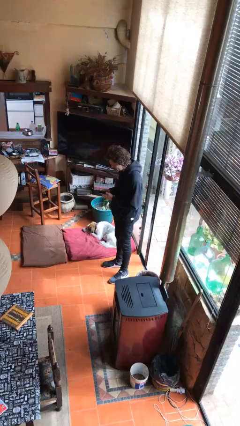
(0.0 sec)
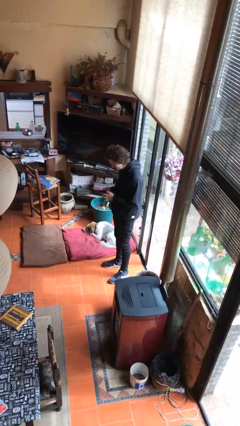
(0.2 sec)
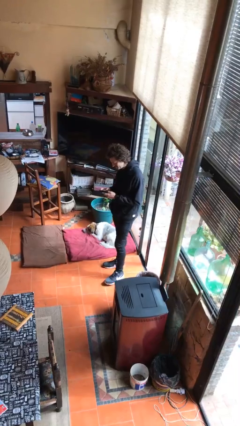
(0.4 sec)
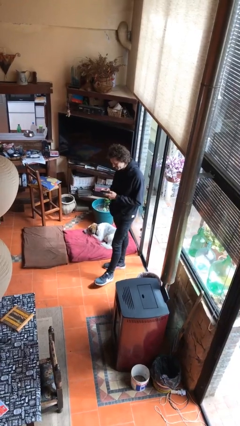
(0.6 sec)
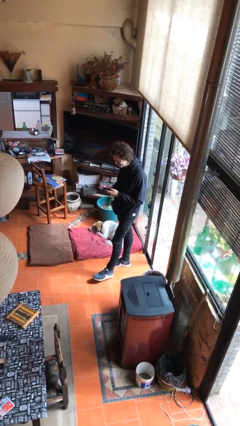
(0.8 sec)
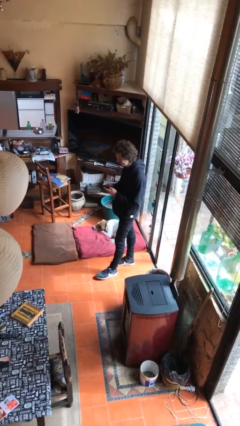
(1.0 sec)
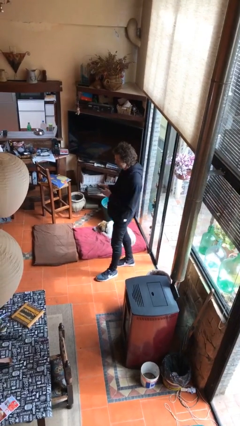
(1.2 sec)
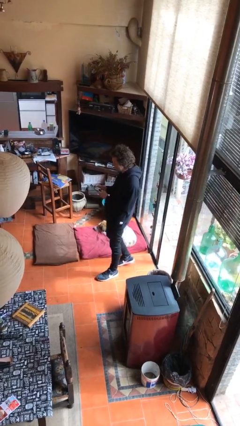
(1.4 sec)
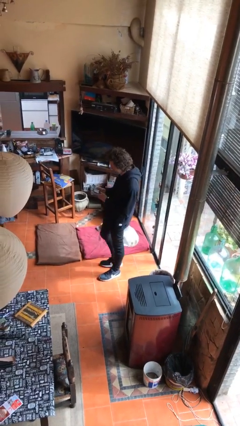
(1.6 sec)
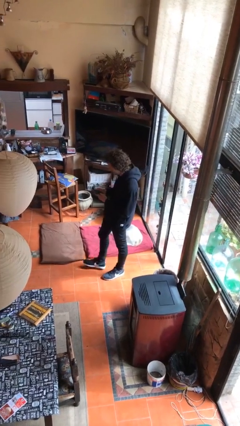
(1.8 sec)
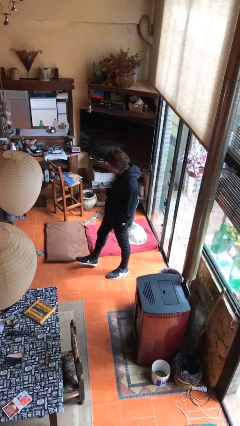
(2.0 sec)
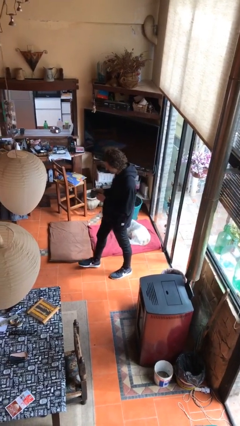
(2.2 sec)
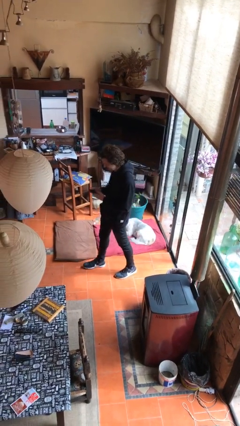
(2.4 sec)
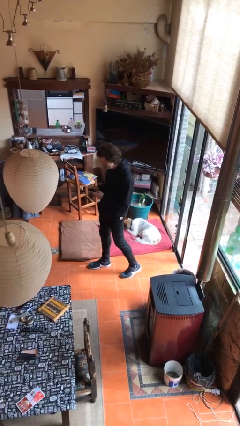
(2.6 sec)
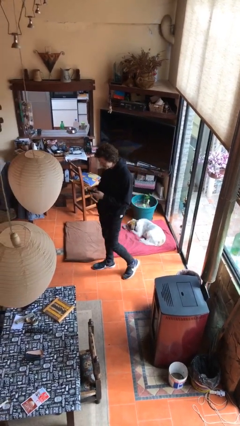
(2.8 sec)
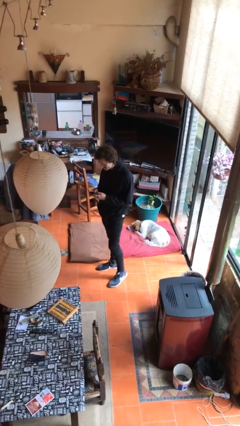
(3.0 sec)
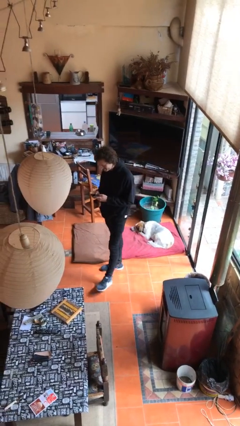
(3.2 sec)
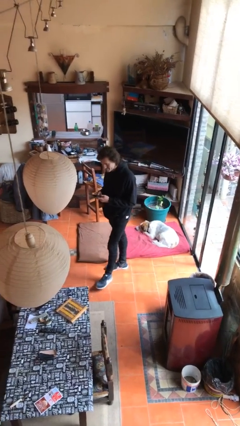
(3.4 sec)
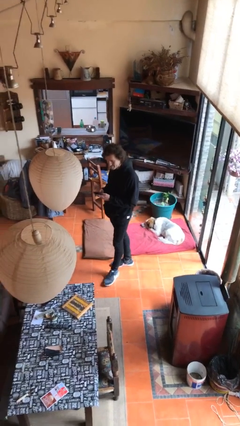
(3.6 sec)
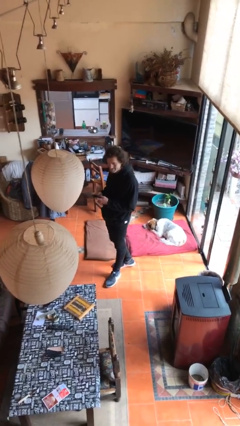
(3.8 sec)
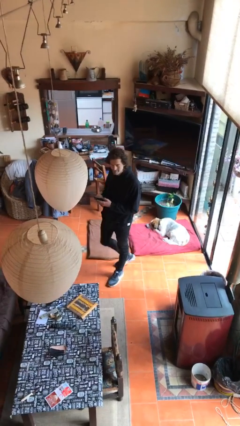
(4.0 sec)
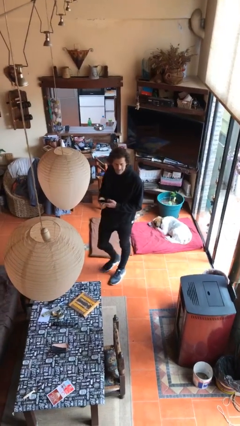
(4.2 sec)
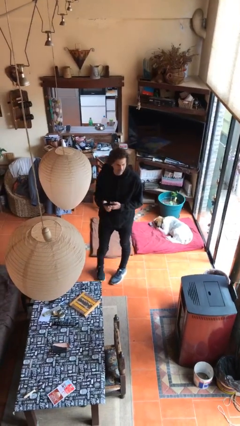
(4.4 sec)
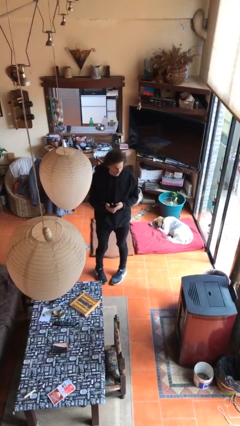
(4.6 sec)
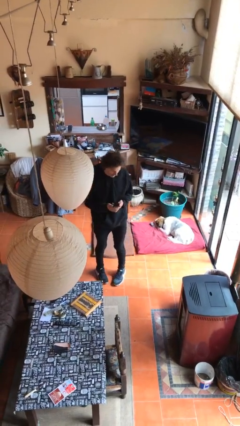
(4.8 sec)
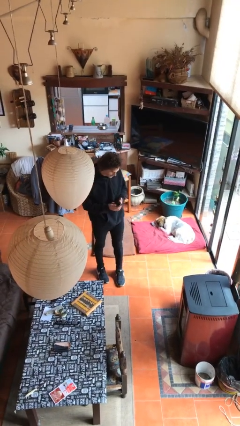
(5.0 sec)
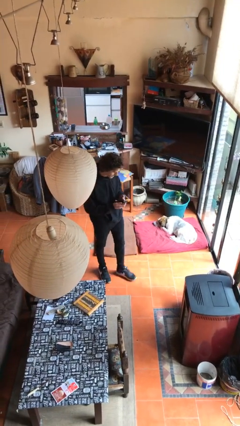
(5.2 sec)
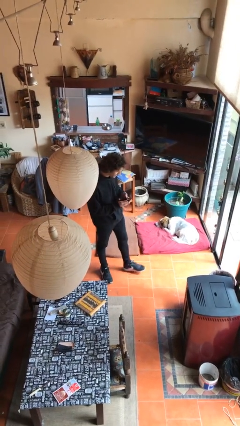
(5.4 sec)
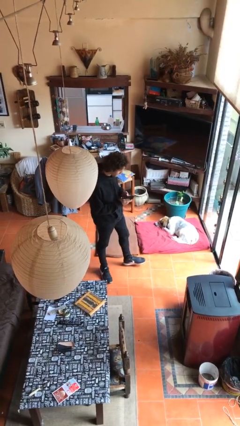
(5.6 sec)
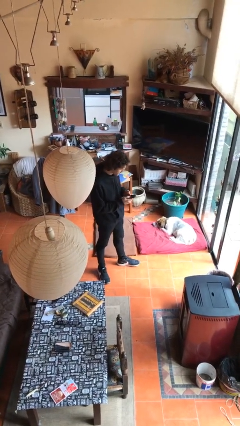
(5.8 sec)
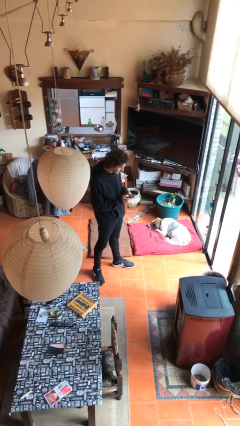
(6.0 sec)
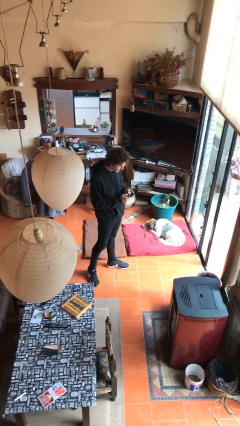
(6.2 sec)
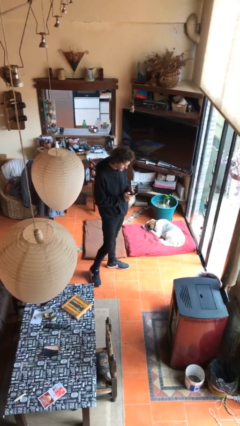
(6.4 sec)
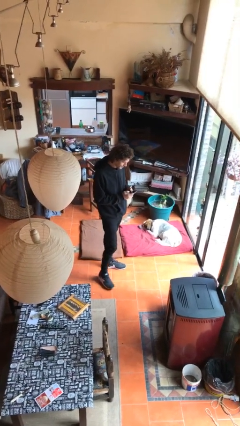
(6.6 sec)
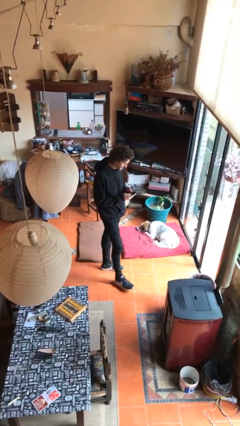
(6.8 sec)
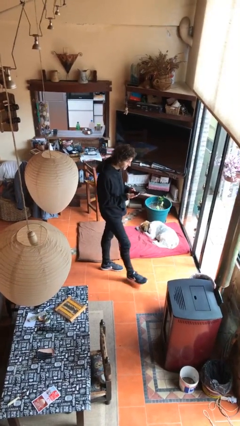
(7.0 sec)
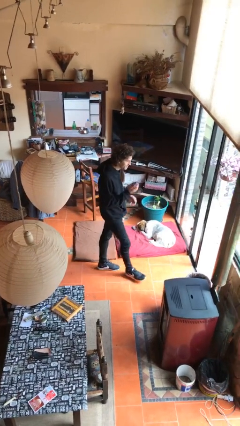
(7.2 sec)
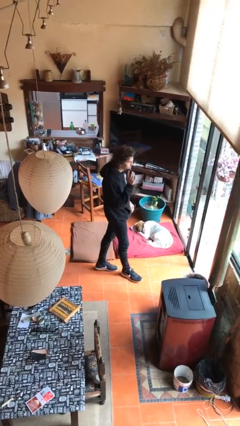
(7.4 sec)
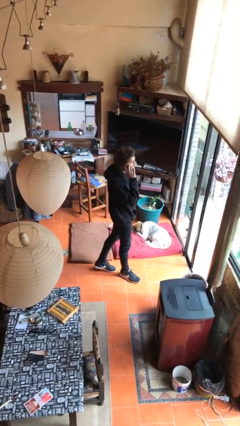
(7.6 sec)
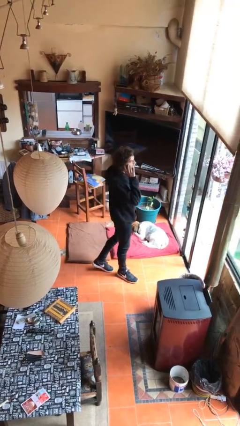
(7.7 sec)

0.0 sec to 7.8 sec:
person texts on phone

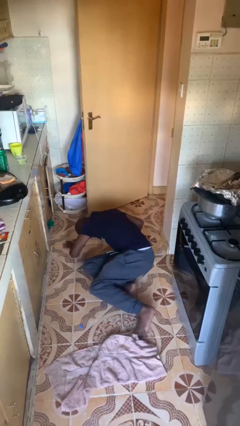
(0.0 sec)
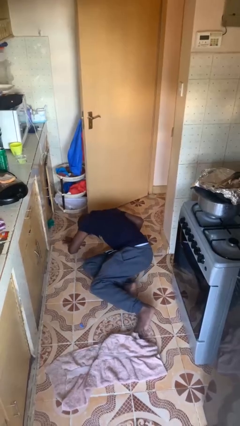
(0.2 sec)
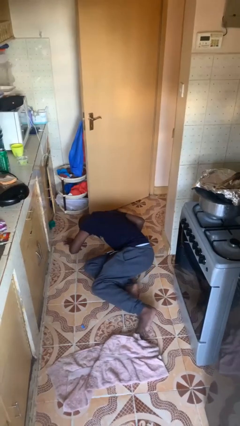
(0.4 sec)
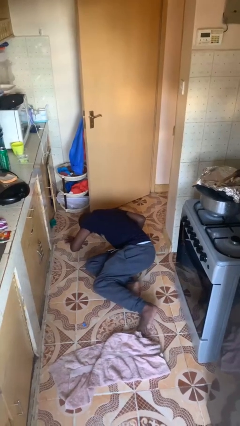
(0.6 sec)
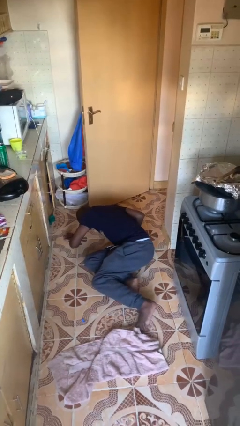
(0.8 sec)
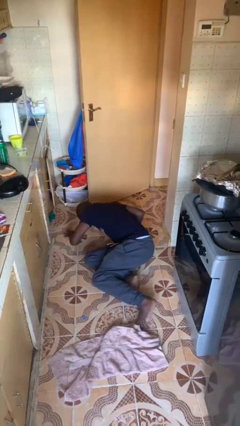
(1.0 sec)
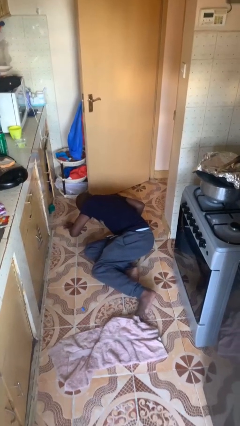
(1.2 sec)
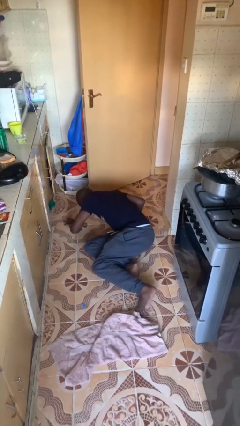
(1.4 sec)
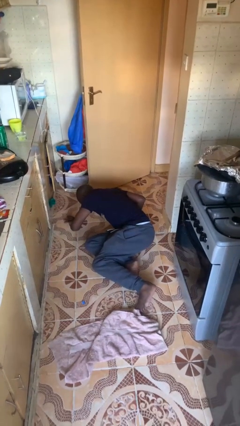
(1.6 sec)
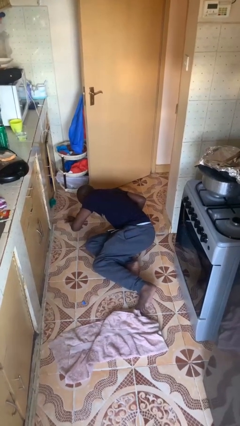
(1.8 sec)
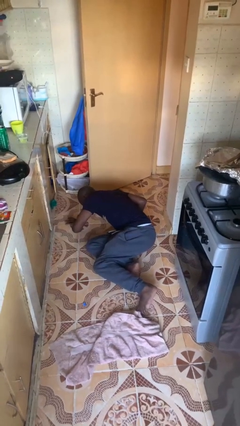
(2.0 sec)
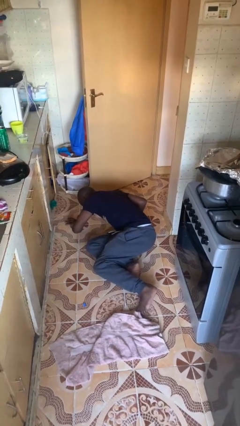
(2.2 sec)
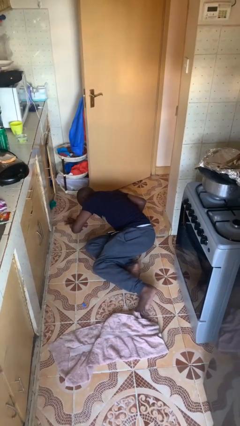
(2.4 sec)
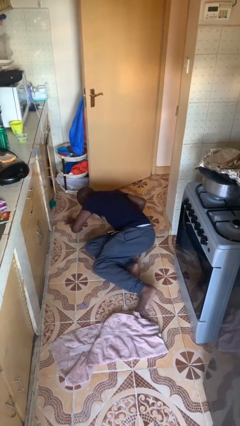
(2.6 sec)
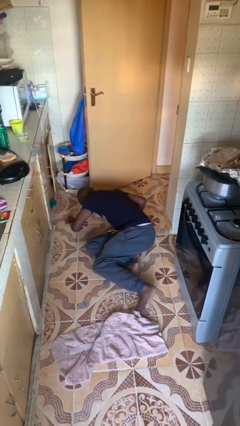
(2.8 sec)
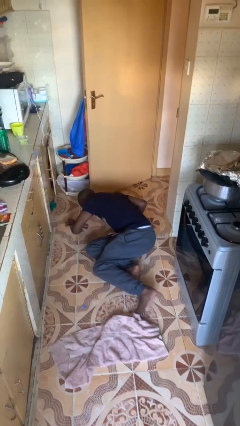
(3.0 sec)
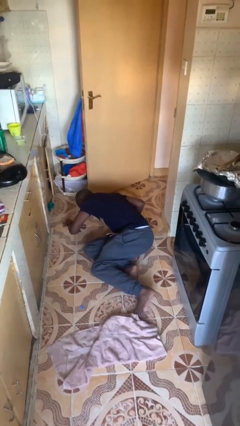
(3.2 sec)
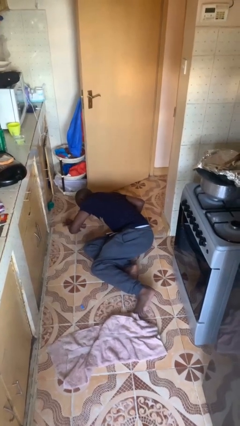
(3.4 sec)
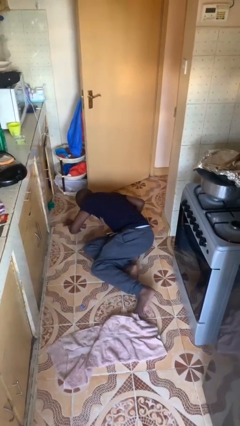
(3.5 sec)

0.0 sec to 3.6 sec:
person lies down on floor

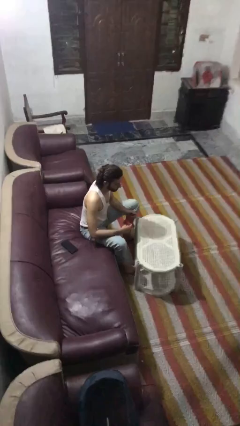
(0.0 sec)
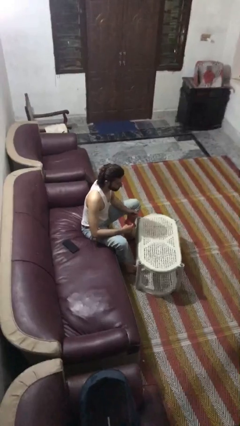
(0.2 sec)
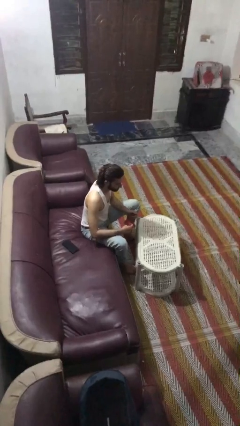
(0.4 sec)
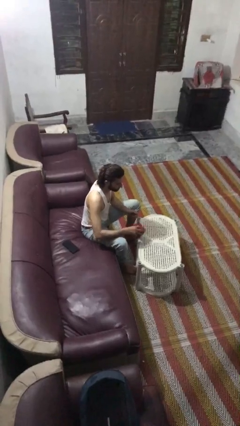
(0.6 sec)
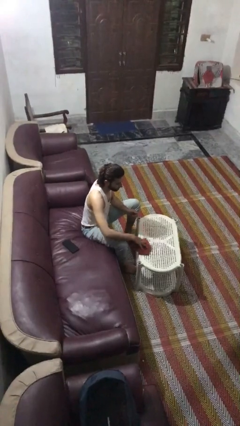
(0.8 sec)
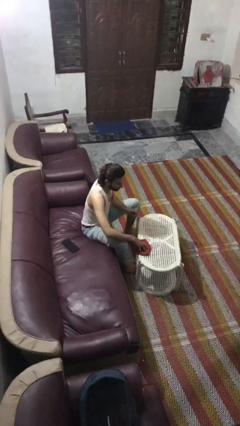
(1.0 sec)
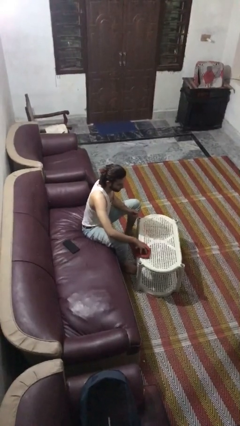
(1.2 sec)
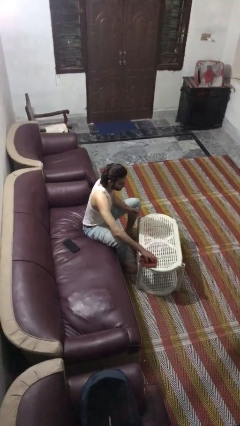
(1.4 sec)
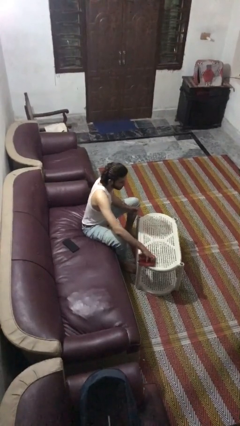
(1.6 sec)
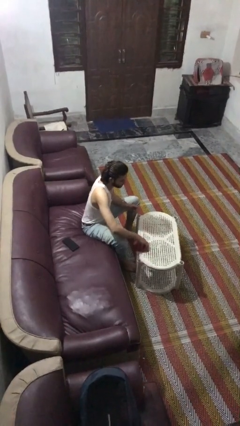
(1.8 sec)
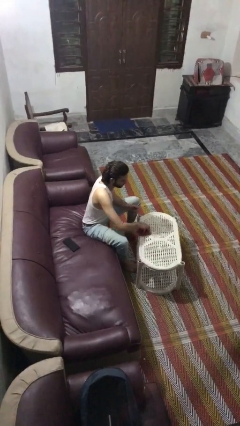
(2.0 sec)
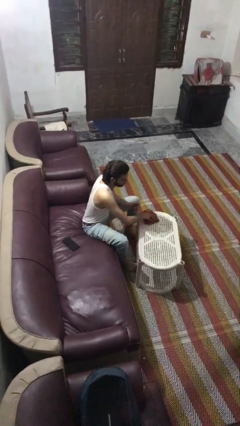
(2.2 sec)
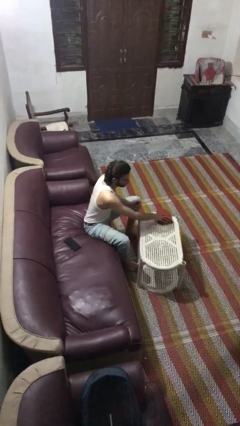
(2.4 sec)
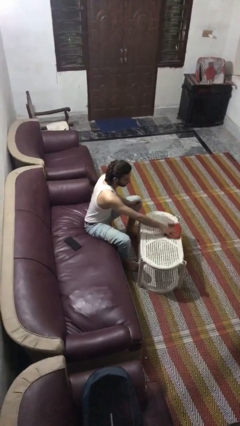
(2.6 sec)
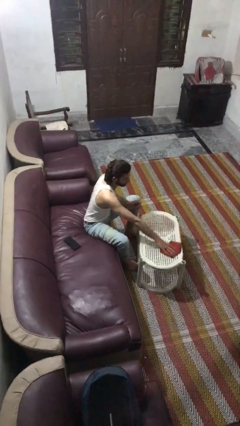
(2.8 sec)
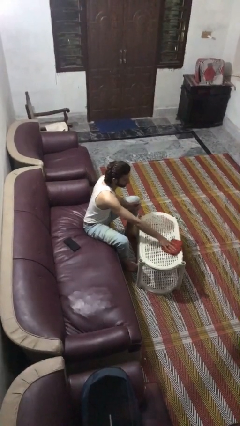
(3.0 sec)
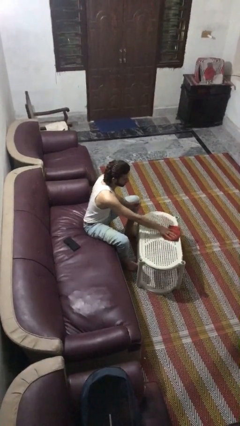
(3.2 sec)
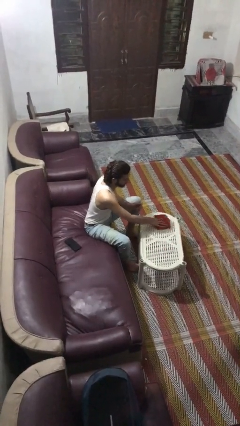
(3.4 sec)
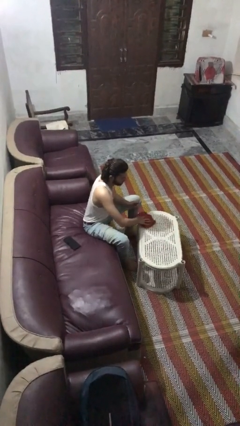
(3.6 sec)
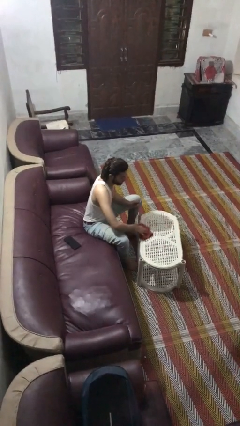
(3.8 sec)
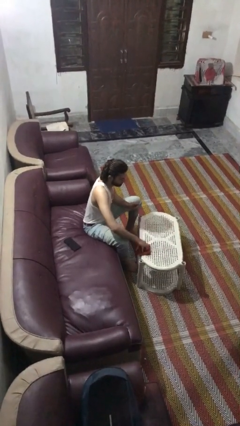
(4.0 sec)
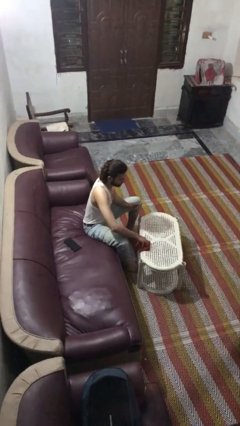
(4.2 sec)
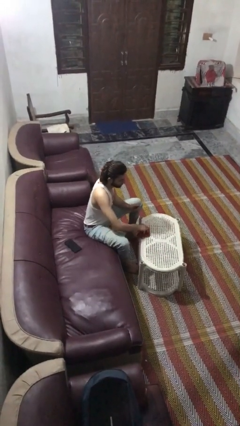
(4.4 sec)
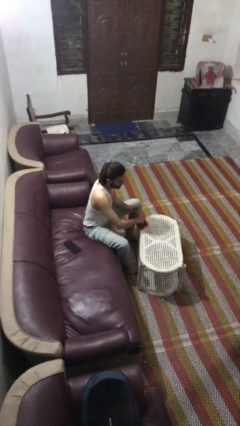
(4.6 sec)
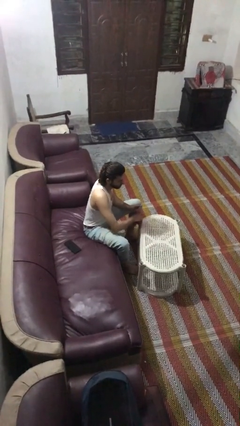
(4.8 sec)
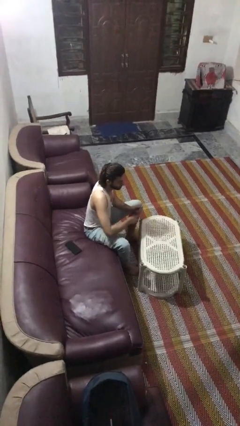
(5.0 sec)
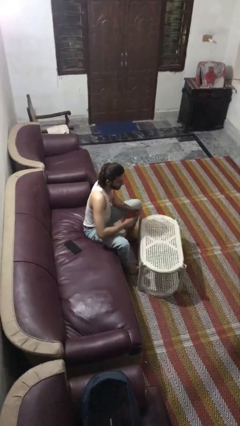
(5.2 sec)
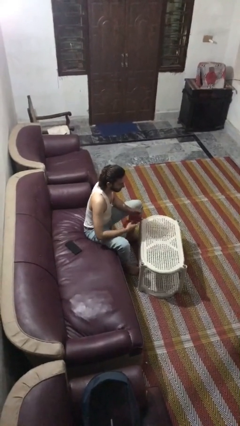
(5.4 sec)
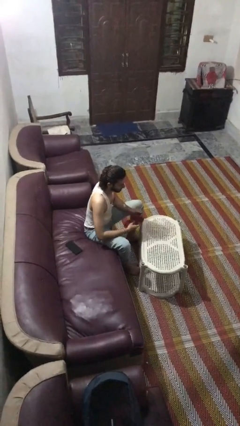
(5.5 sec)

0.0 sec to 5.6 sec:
person cleans table with rag

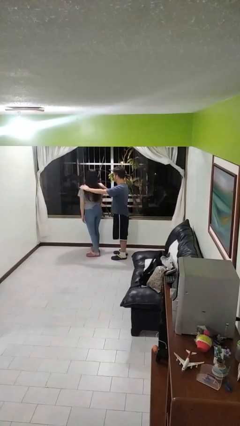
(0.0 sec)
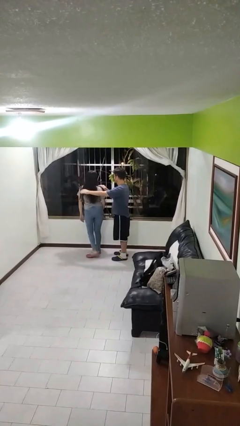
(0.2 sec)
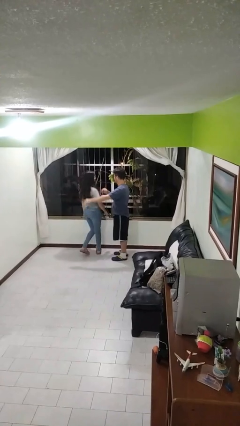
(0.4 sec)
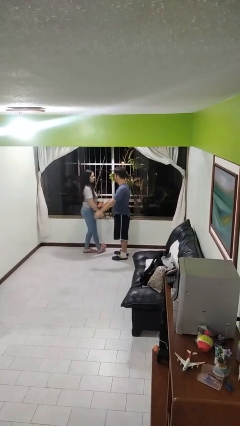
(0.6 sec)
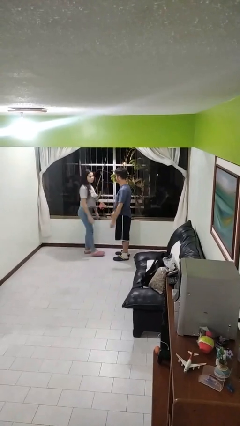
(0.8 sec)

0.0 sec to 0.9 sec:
person spins person around
